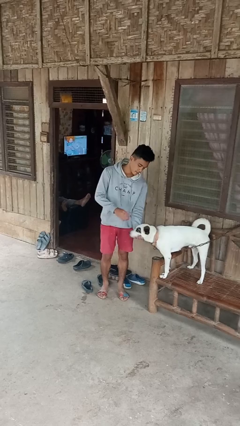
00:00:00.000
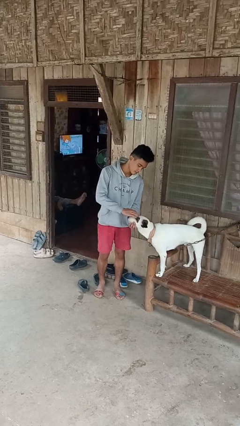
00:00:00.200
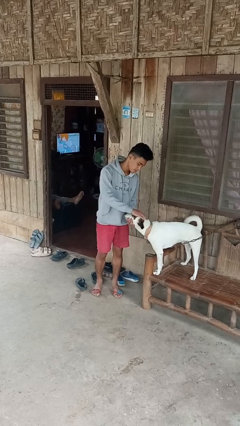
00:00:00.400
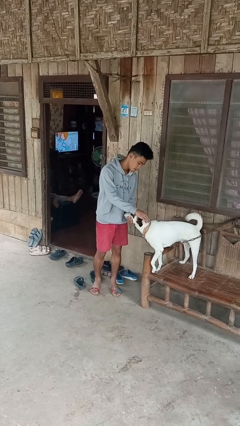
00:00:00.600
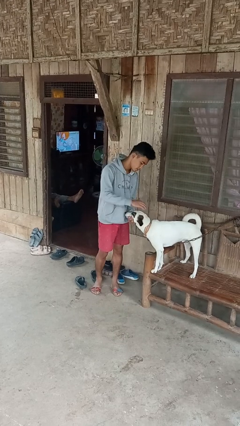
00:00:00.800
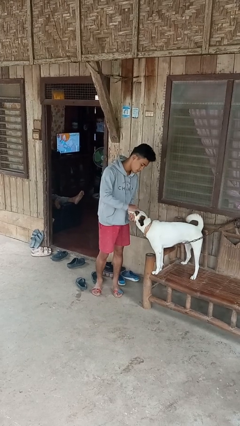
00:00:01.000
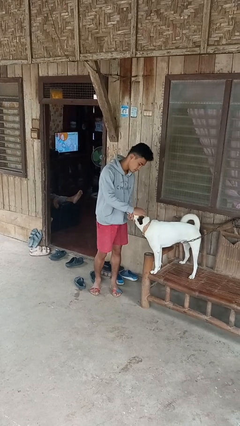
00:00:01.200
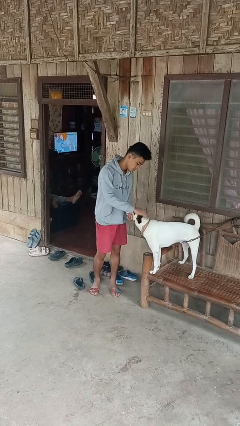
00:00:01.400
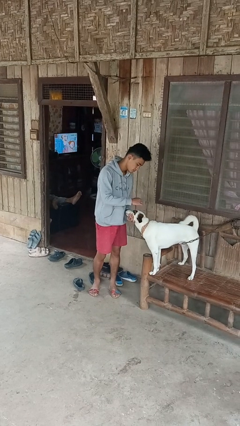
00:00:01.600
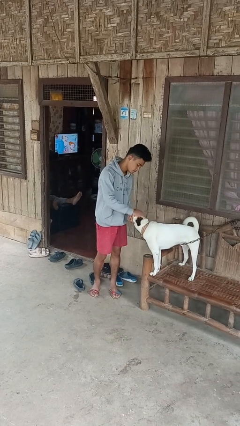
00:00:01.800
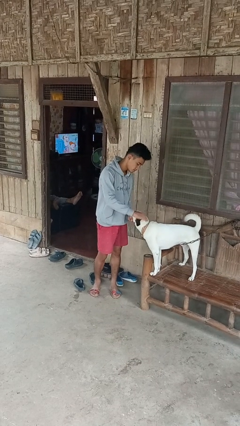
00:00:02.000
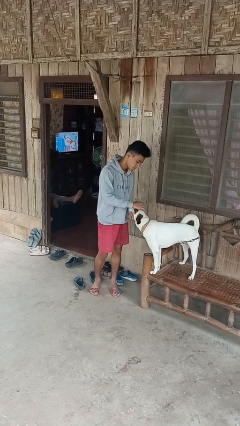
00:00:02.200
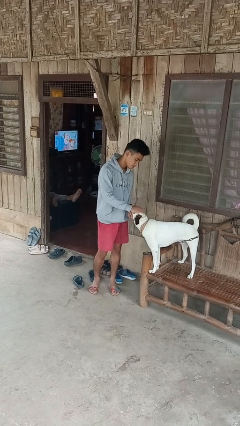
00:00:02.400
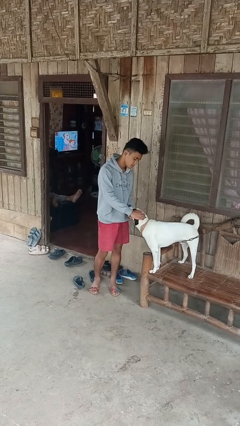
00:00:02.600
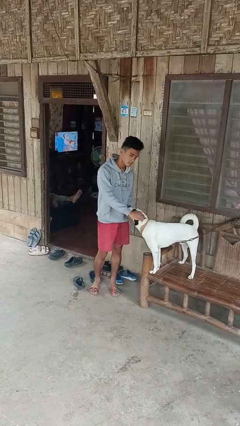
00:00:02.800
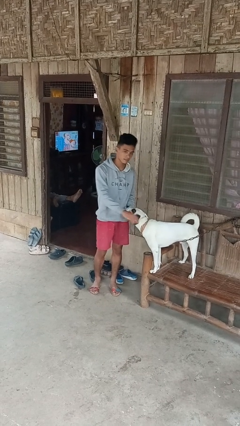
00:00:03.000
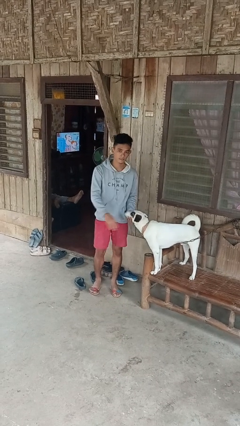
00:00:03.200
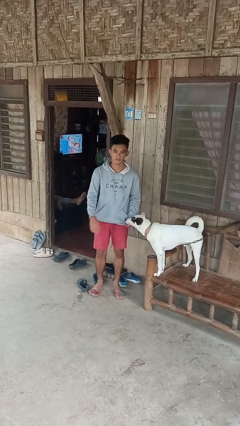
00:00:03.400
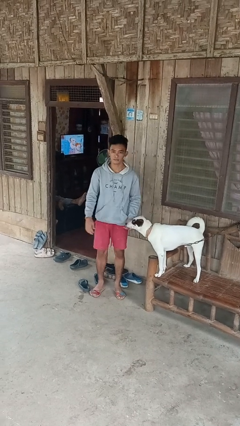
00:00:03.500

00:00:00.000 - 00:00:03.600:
person pets dog

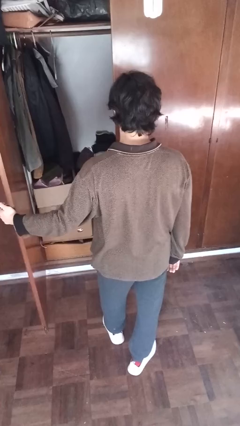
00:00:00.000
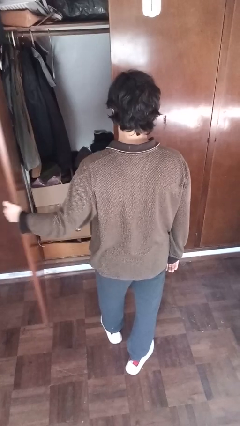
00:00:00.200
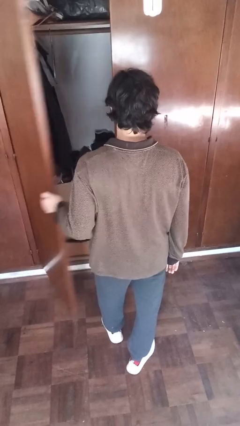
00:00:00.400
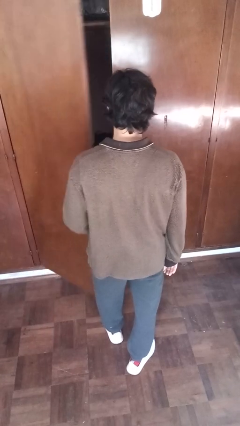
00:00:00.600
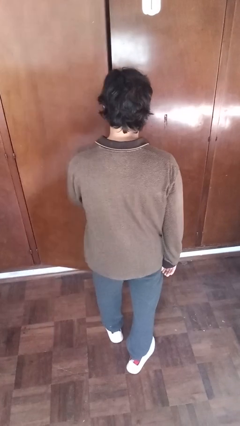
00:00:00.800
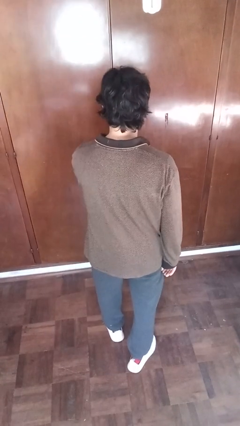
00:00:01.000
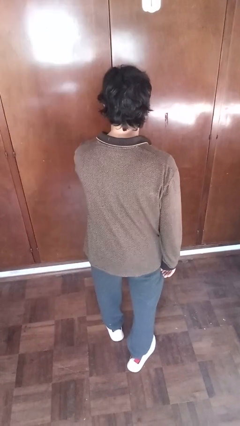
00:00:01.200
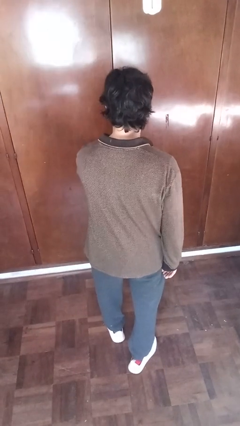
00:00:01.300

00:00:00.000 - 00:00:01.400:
person closes closet door

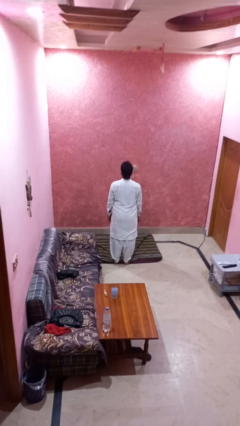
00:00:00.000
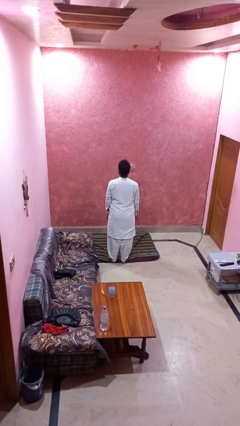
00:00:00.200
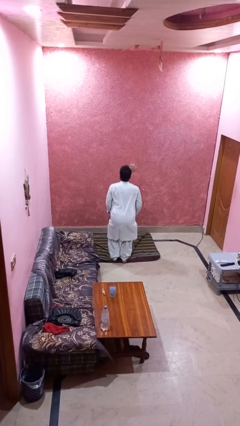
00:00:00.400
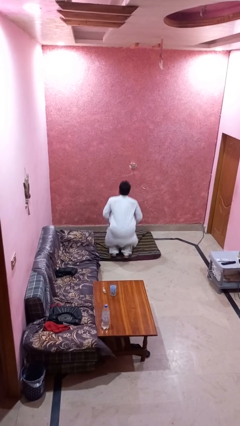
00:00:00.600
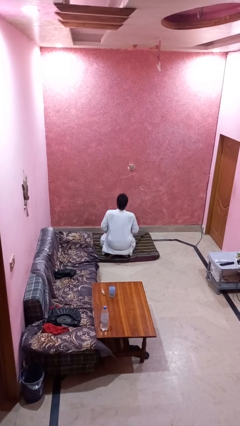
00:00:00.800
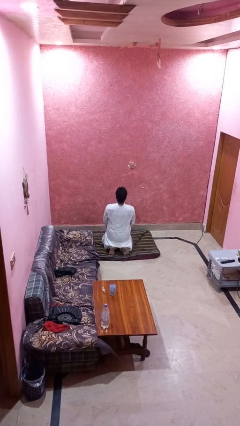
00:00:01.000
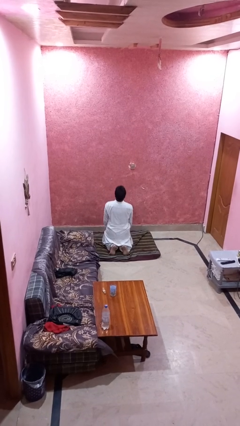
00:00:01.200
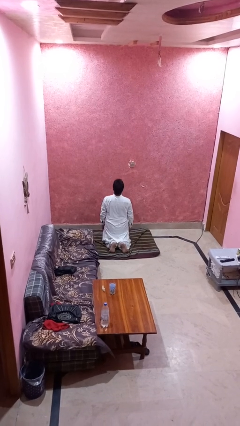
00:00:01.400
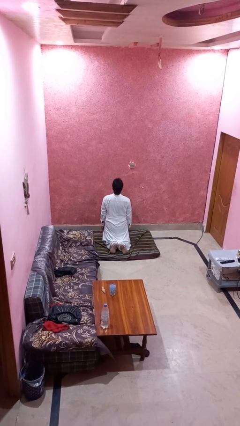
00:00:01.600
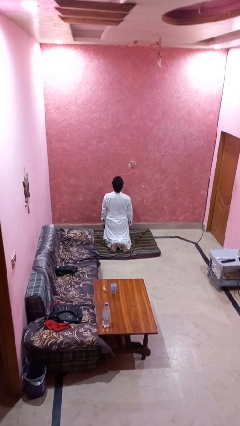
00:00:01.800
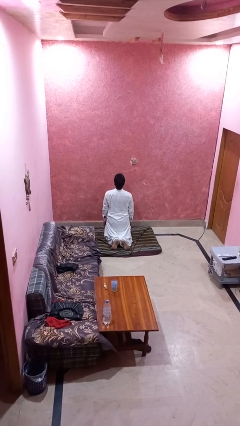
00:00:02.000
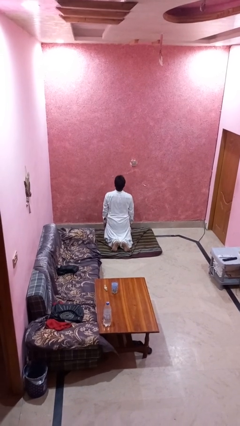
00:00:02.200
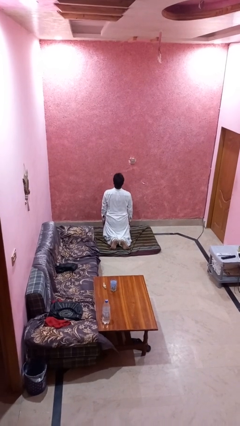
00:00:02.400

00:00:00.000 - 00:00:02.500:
person kneels

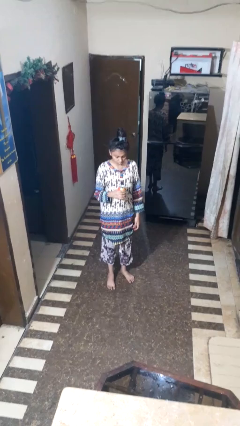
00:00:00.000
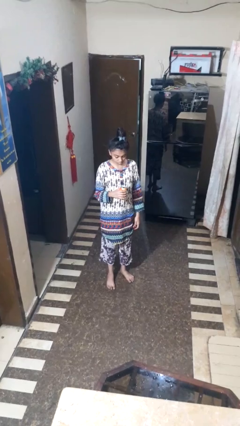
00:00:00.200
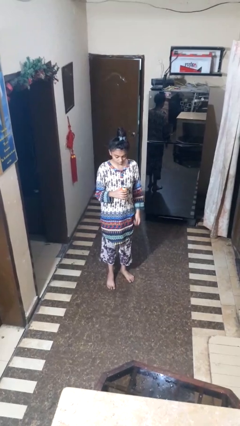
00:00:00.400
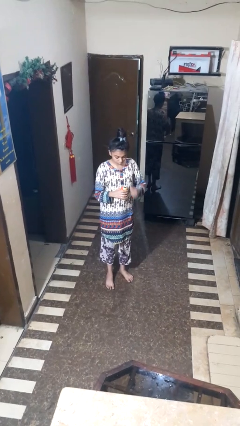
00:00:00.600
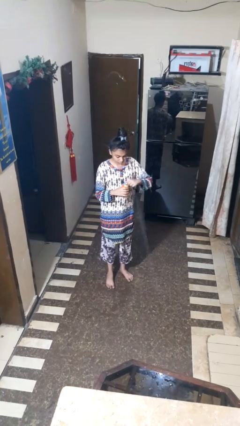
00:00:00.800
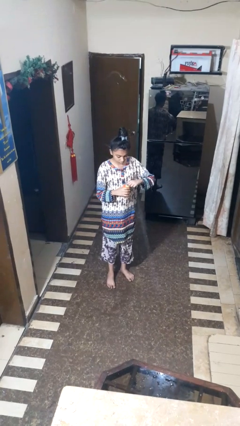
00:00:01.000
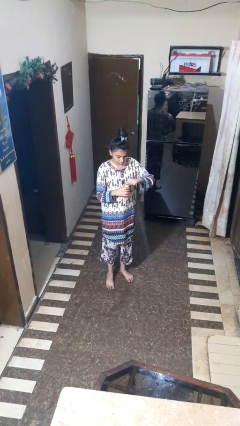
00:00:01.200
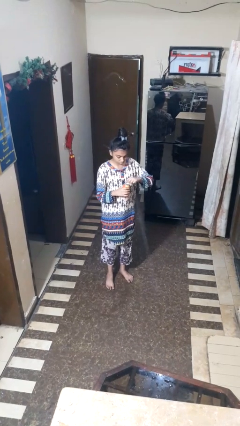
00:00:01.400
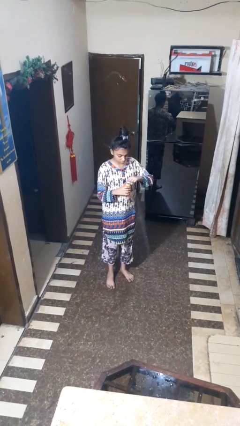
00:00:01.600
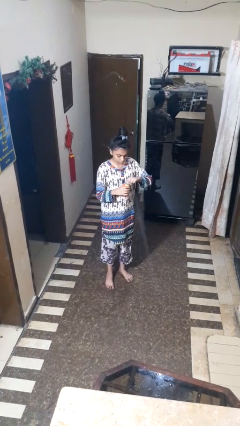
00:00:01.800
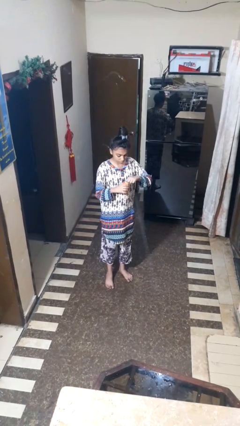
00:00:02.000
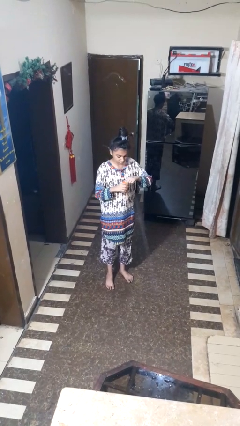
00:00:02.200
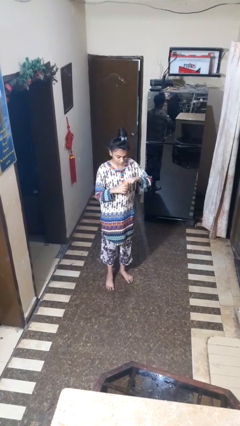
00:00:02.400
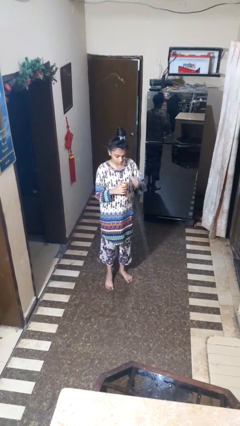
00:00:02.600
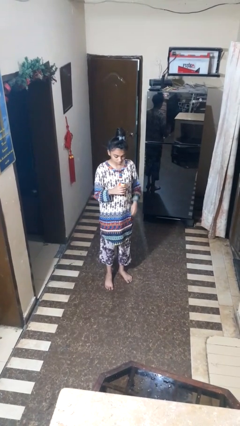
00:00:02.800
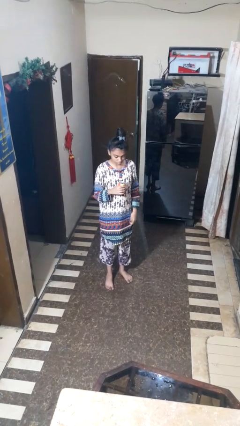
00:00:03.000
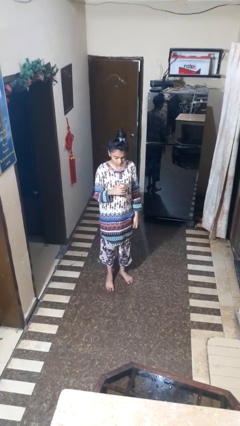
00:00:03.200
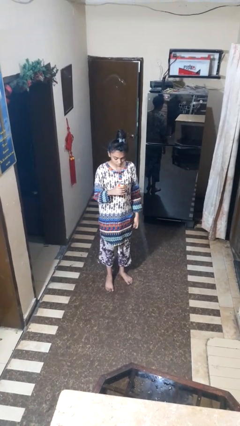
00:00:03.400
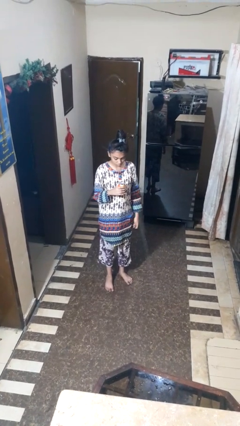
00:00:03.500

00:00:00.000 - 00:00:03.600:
person opens beverage can

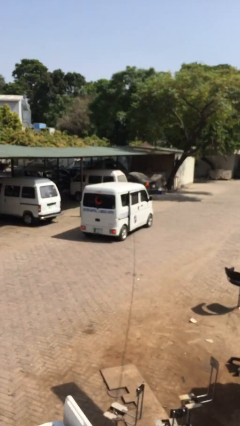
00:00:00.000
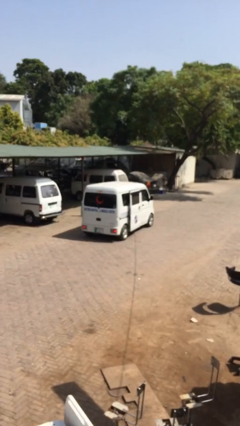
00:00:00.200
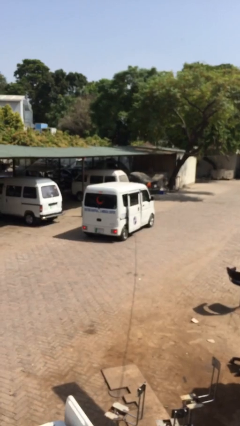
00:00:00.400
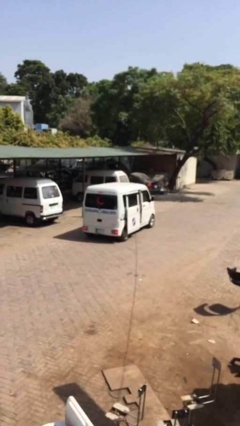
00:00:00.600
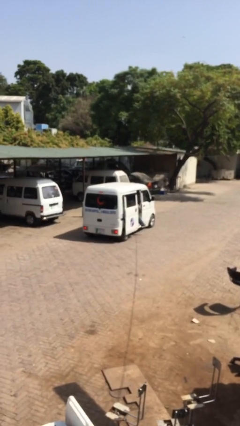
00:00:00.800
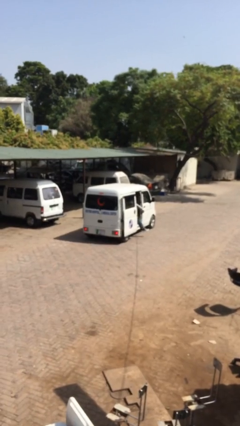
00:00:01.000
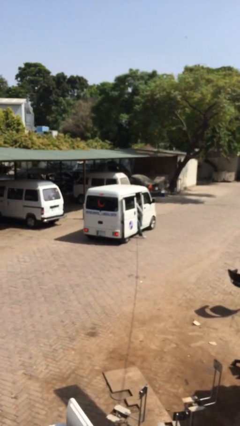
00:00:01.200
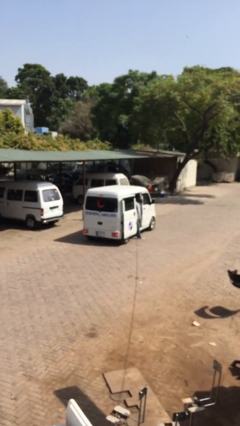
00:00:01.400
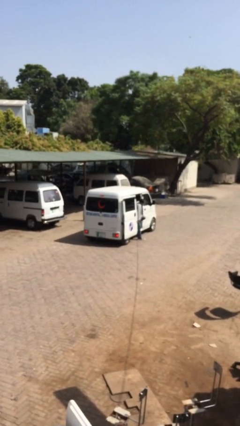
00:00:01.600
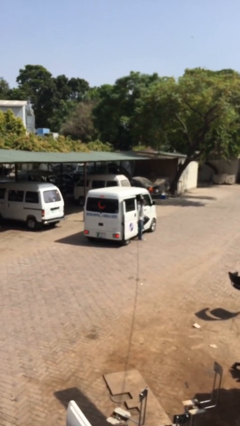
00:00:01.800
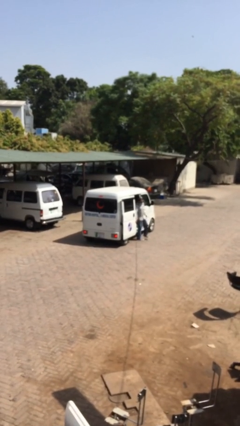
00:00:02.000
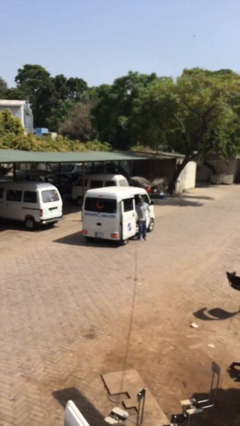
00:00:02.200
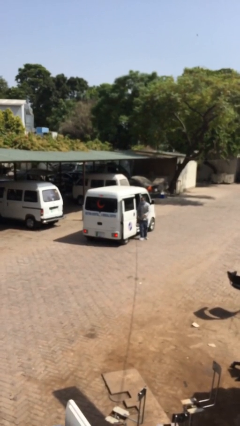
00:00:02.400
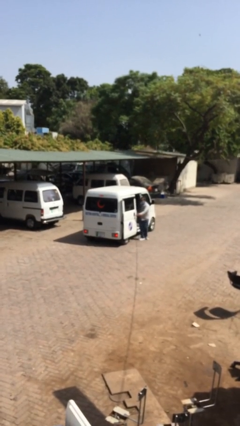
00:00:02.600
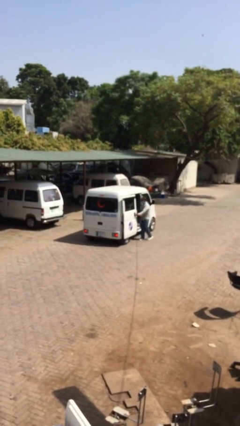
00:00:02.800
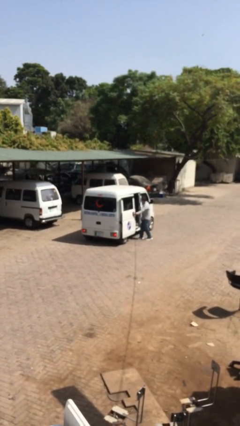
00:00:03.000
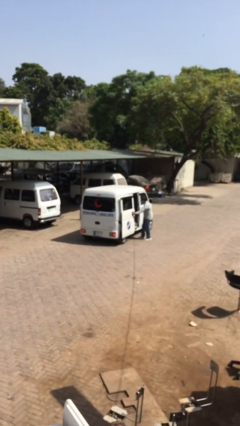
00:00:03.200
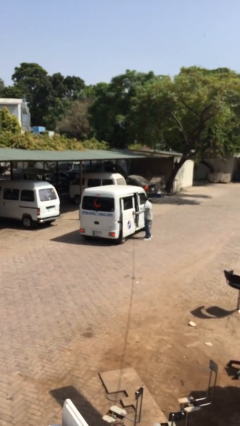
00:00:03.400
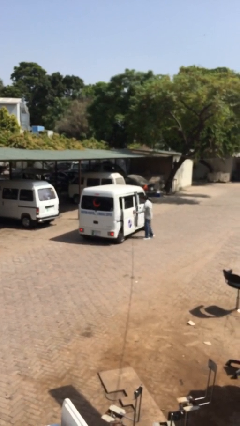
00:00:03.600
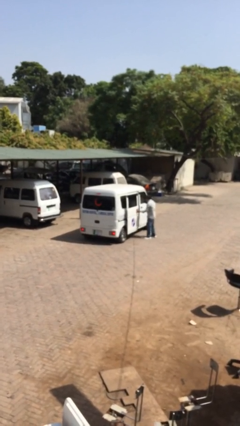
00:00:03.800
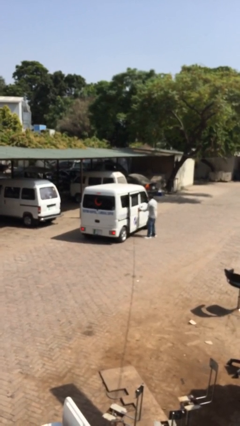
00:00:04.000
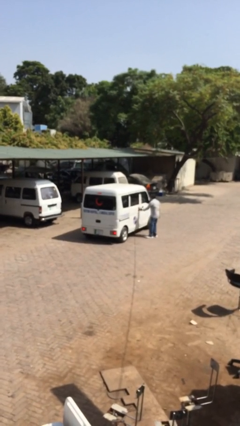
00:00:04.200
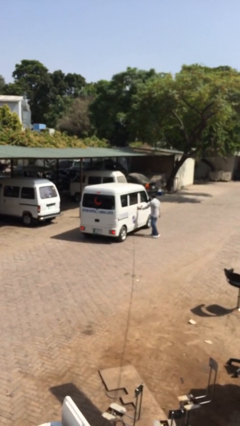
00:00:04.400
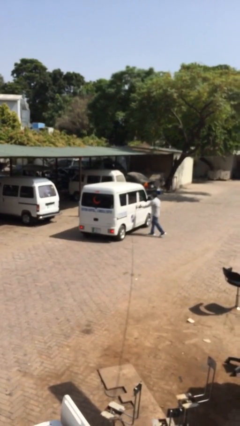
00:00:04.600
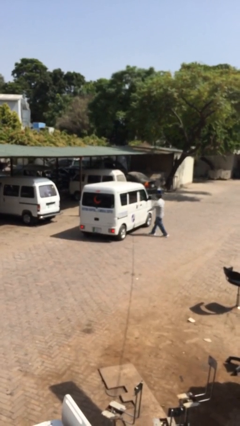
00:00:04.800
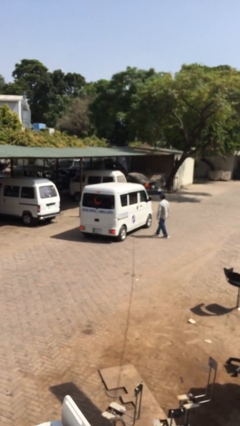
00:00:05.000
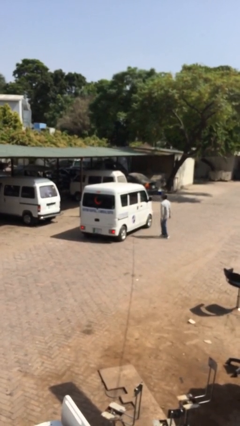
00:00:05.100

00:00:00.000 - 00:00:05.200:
car drops off person

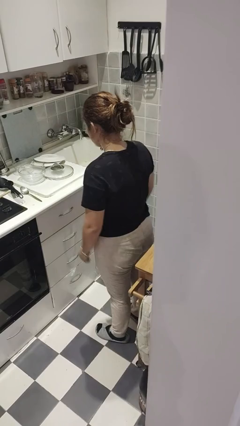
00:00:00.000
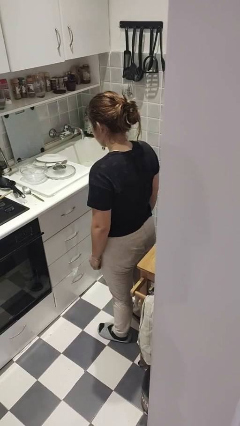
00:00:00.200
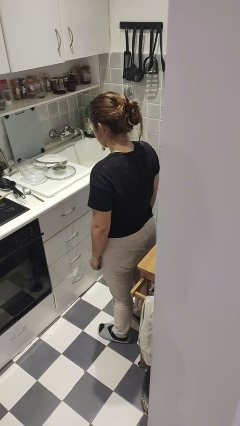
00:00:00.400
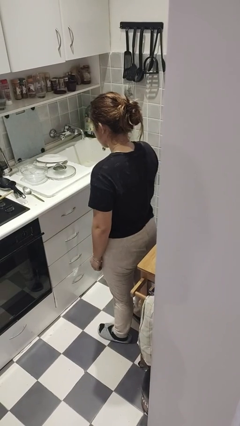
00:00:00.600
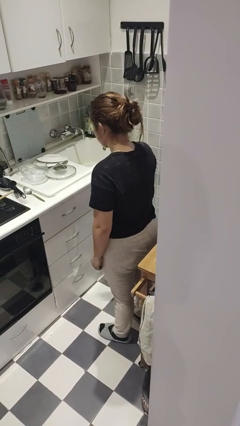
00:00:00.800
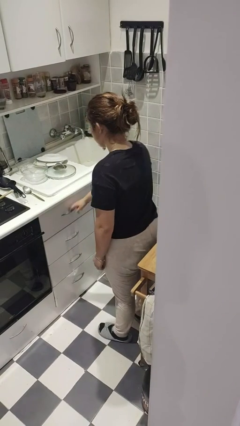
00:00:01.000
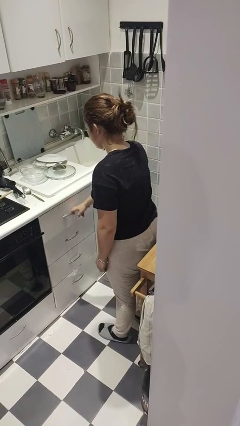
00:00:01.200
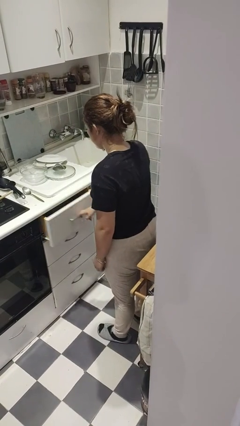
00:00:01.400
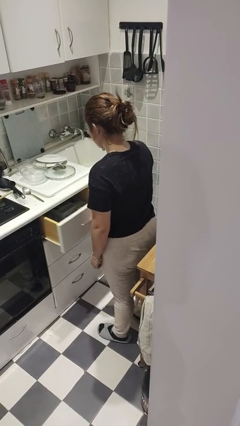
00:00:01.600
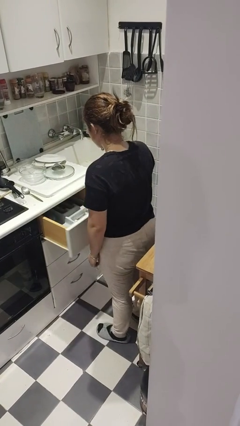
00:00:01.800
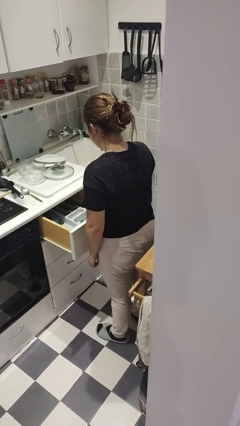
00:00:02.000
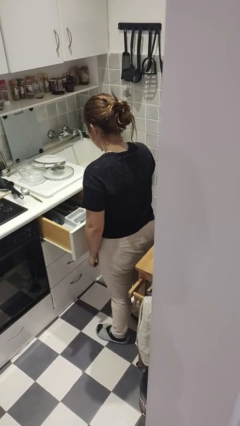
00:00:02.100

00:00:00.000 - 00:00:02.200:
person opens kitchen drawer
